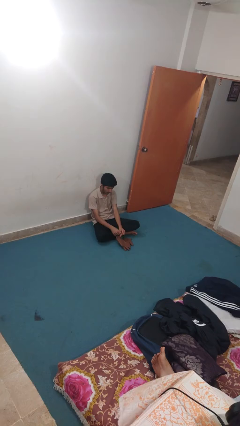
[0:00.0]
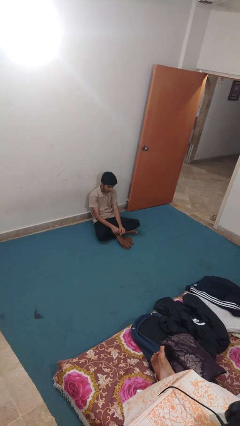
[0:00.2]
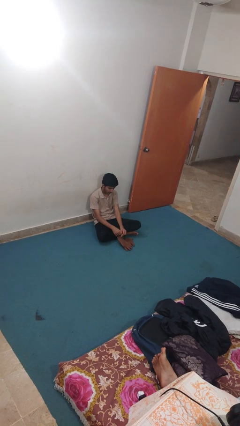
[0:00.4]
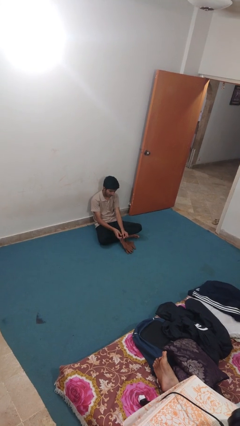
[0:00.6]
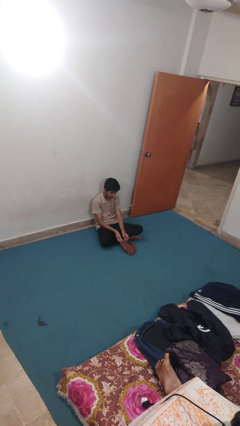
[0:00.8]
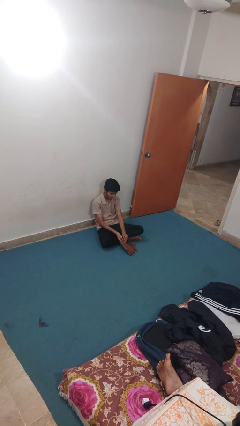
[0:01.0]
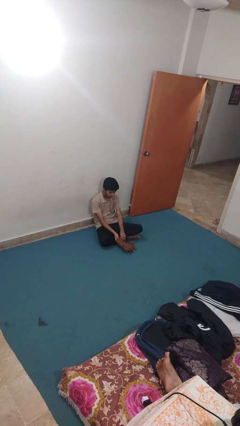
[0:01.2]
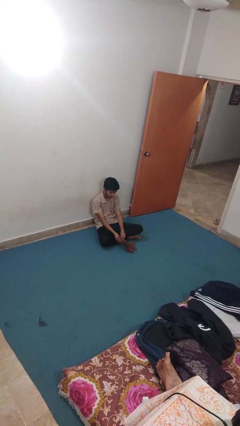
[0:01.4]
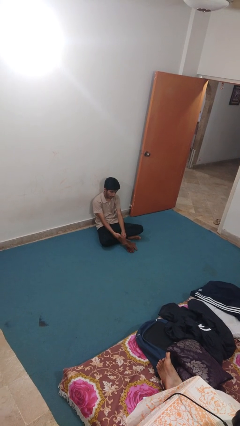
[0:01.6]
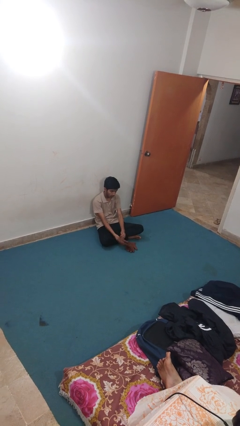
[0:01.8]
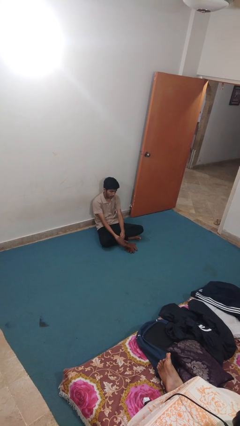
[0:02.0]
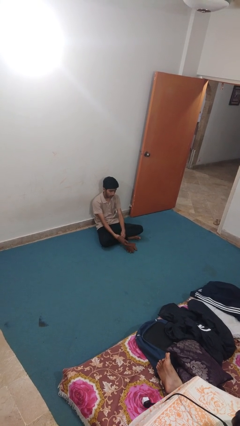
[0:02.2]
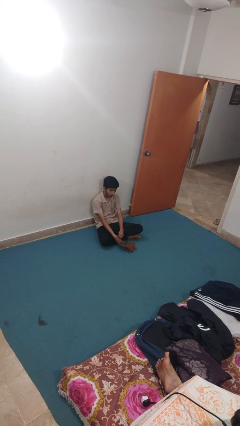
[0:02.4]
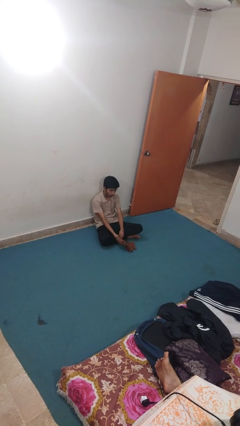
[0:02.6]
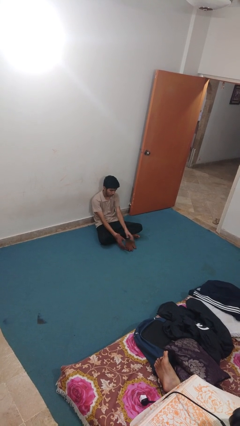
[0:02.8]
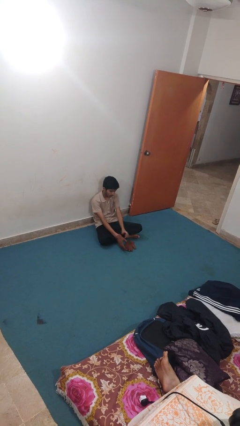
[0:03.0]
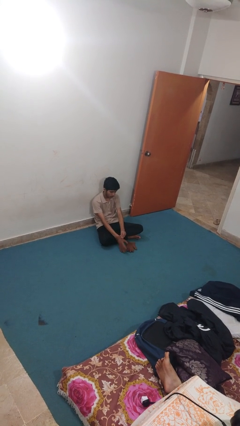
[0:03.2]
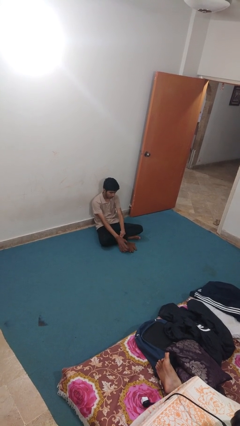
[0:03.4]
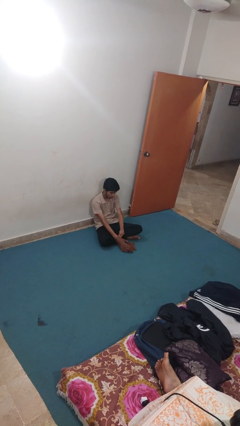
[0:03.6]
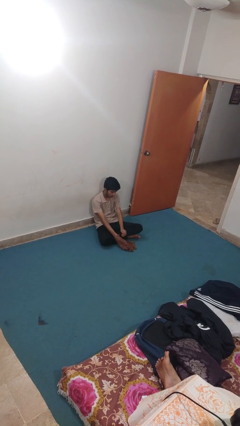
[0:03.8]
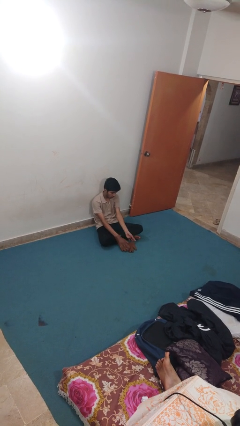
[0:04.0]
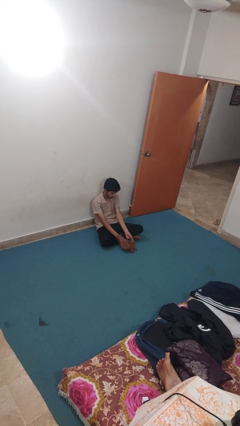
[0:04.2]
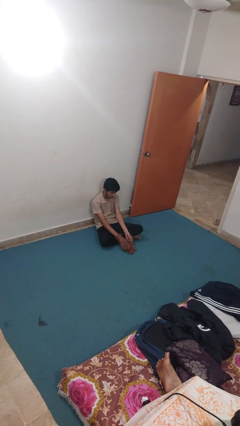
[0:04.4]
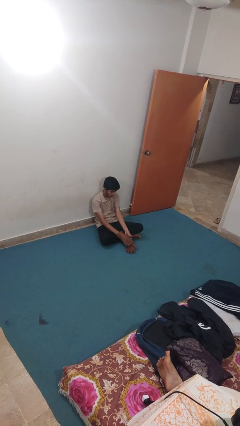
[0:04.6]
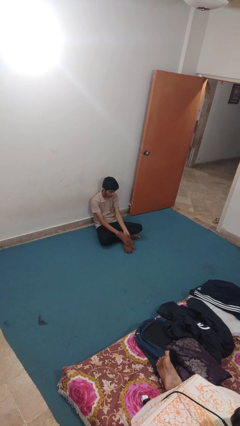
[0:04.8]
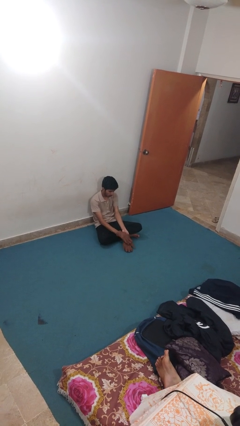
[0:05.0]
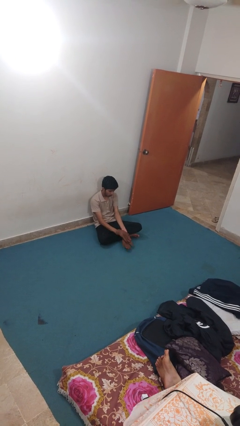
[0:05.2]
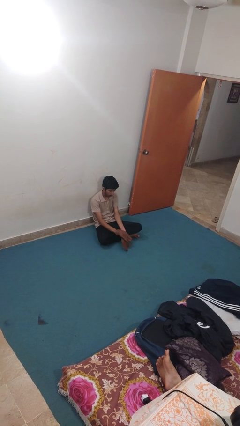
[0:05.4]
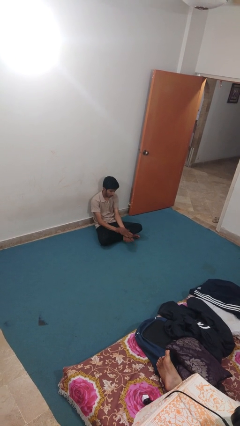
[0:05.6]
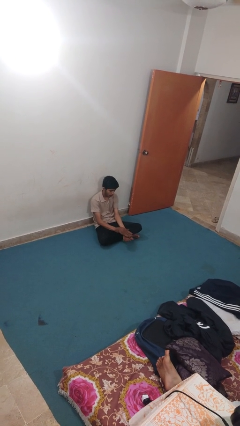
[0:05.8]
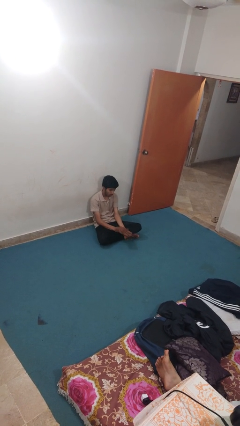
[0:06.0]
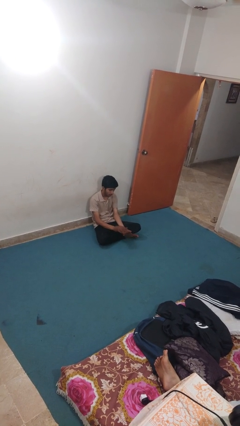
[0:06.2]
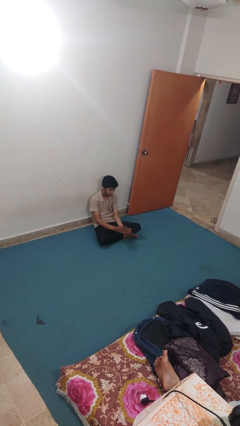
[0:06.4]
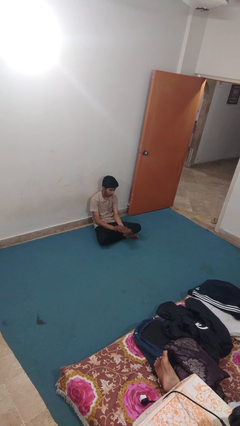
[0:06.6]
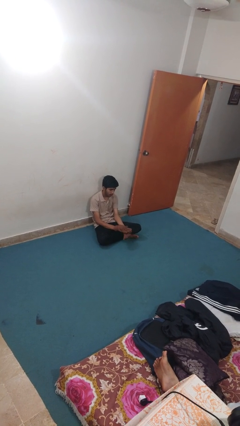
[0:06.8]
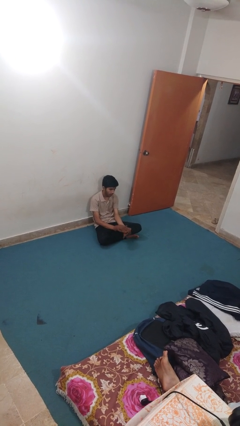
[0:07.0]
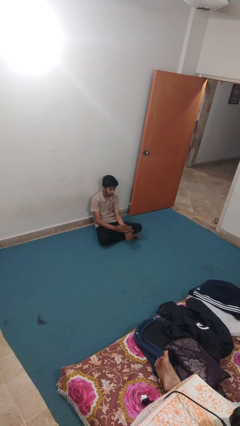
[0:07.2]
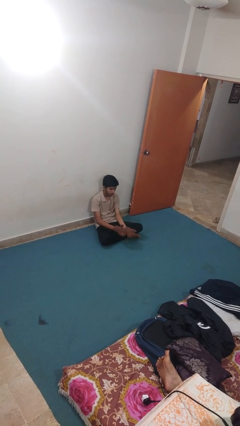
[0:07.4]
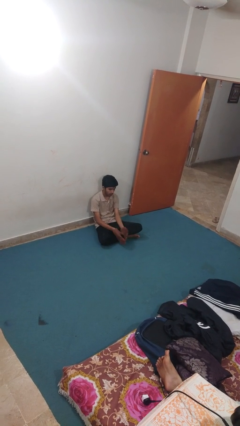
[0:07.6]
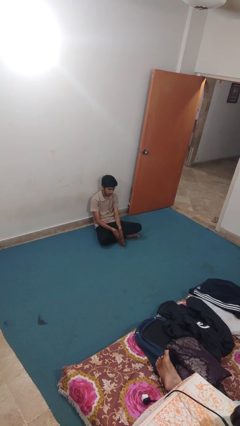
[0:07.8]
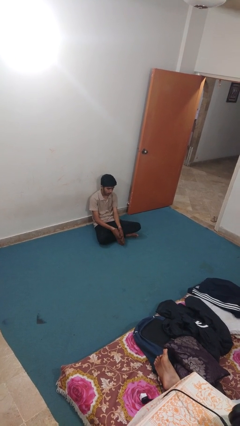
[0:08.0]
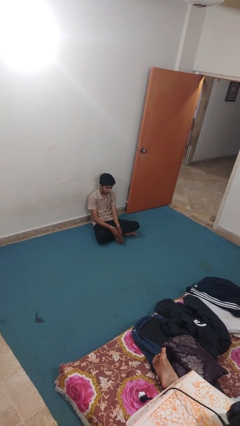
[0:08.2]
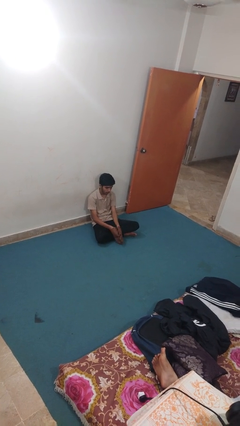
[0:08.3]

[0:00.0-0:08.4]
person puts on gloves

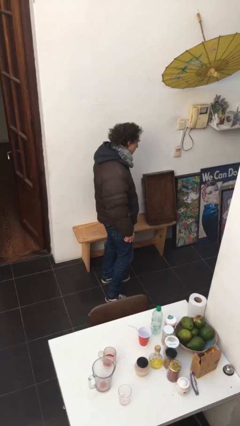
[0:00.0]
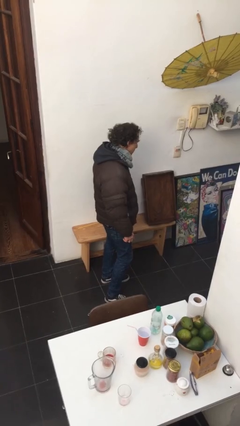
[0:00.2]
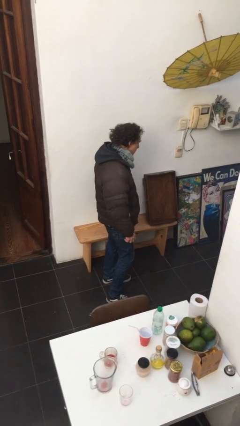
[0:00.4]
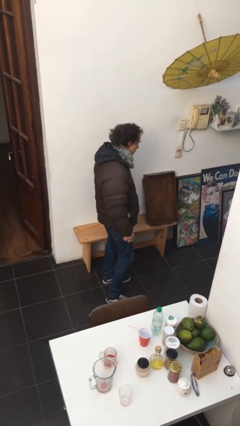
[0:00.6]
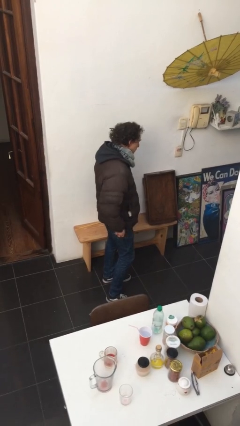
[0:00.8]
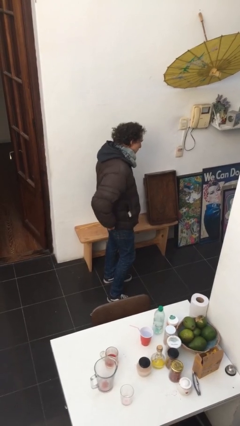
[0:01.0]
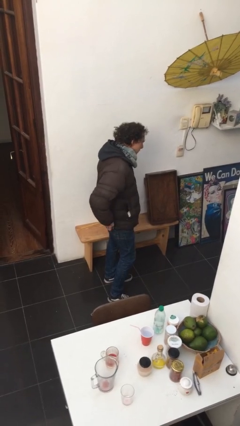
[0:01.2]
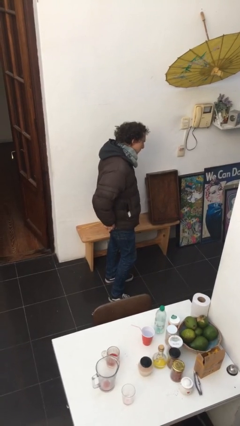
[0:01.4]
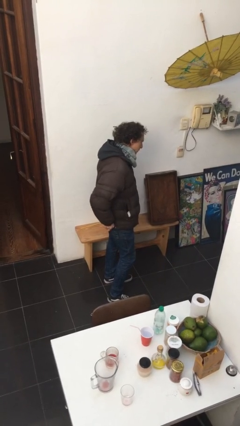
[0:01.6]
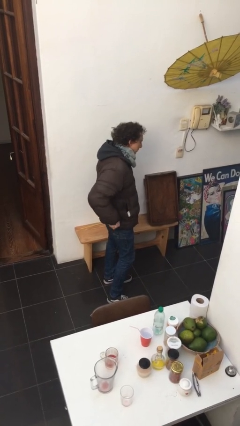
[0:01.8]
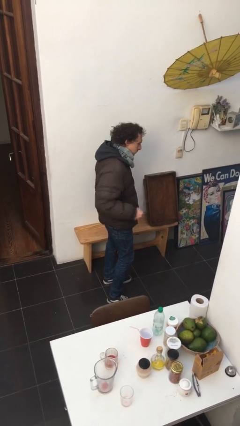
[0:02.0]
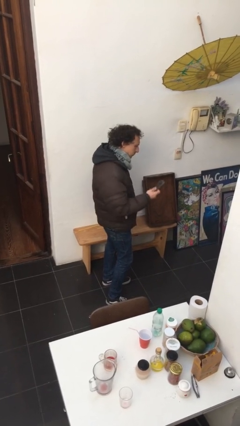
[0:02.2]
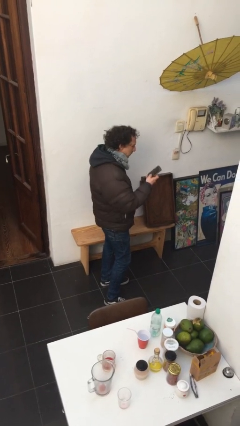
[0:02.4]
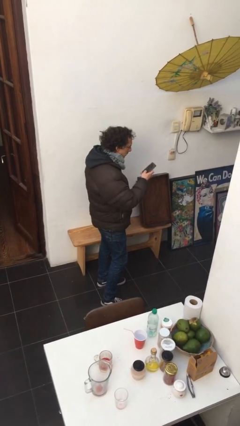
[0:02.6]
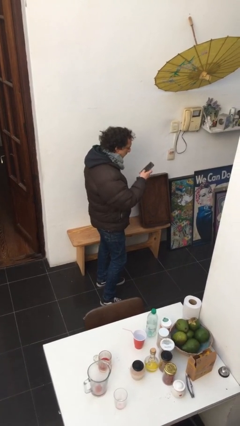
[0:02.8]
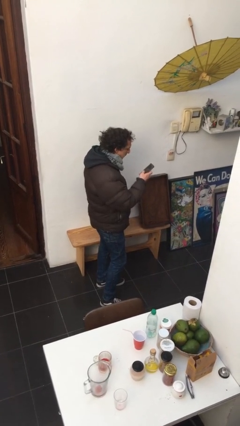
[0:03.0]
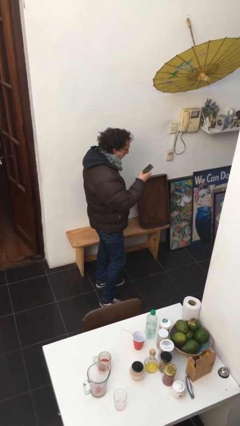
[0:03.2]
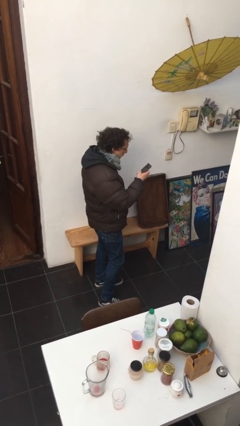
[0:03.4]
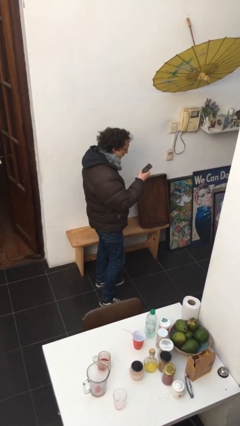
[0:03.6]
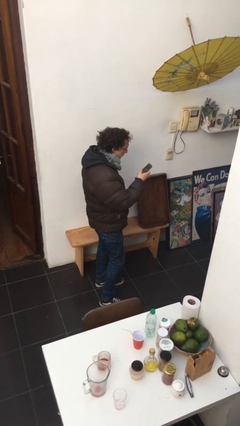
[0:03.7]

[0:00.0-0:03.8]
person takes phone from pocket

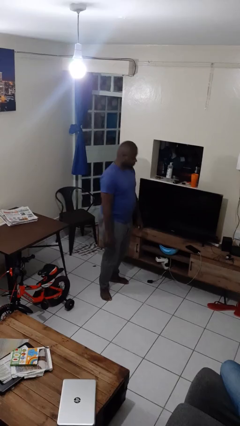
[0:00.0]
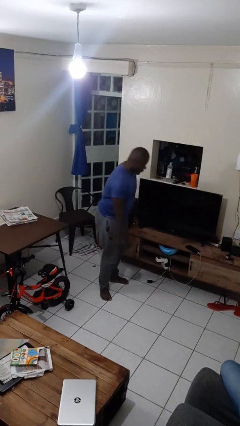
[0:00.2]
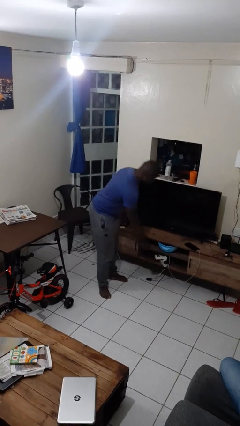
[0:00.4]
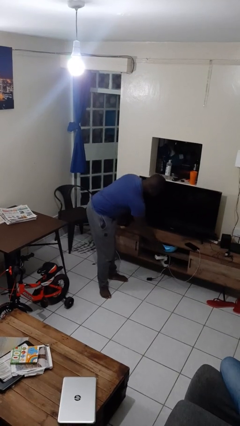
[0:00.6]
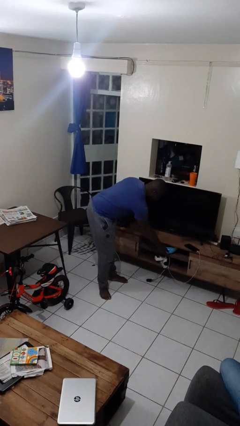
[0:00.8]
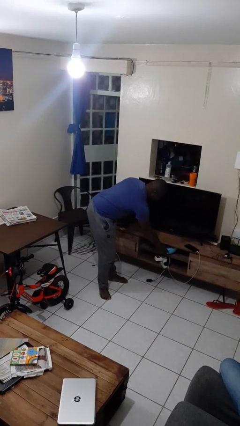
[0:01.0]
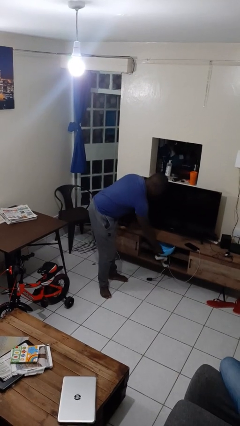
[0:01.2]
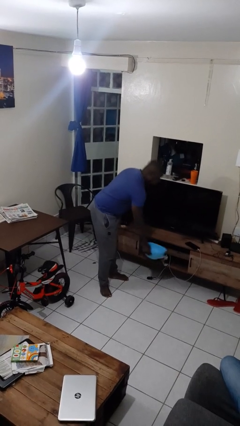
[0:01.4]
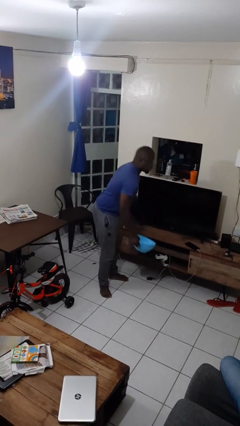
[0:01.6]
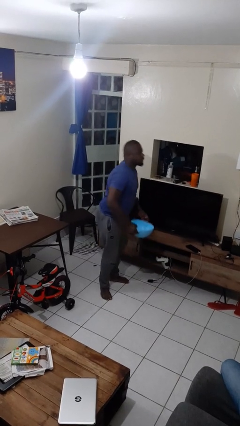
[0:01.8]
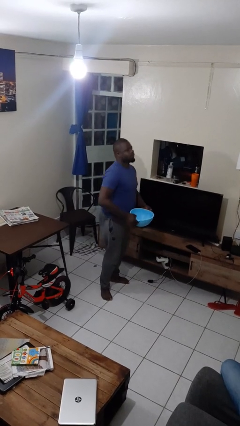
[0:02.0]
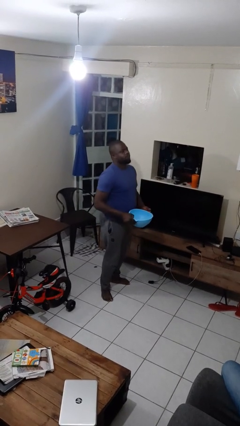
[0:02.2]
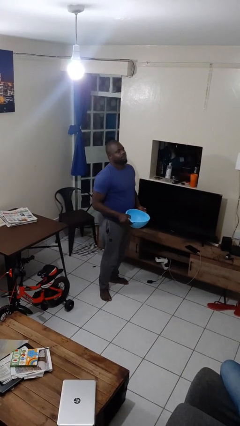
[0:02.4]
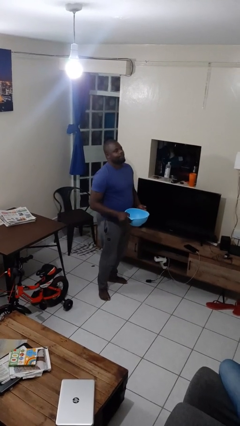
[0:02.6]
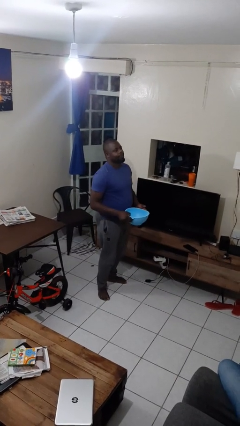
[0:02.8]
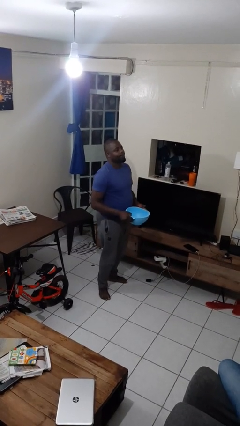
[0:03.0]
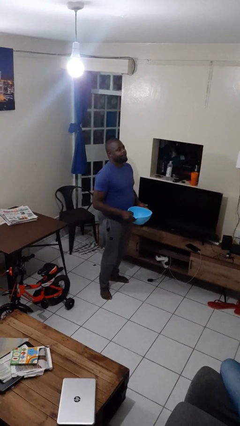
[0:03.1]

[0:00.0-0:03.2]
person picks up object from cabinet

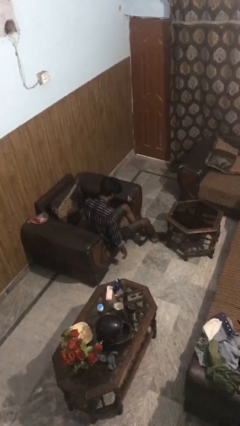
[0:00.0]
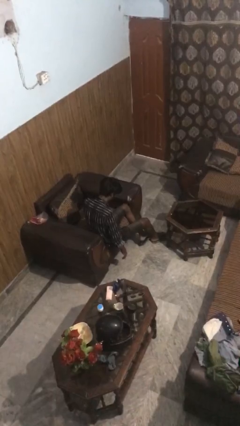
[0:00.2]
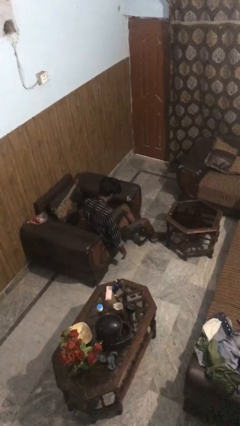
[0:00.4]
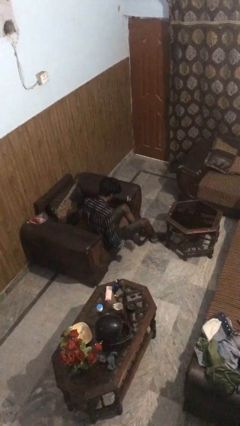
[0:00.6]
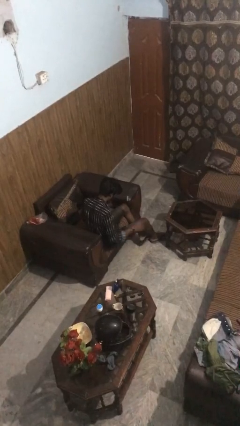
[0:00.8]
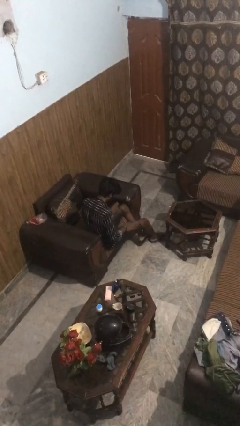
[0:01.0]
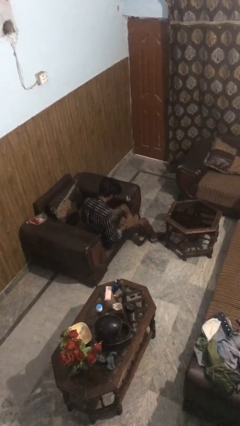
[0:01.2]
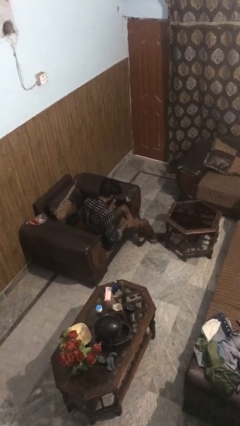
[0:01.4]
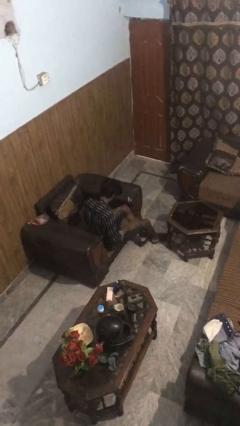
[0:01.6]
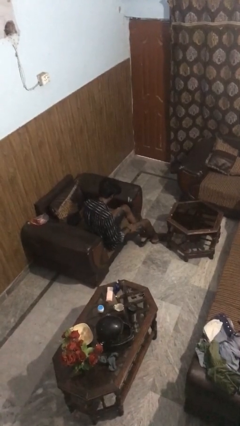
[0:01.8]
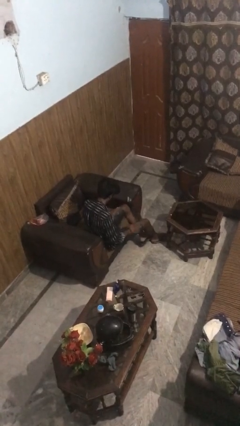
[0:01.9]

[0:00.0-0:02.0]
person slaps hands on thighs
